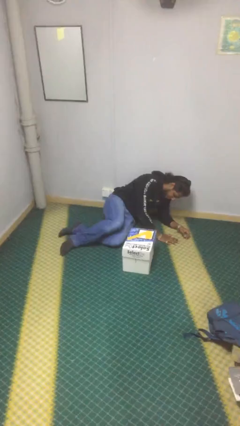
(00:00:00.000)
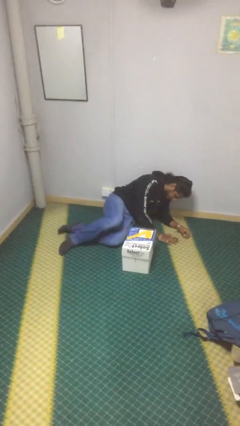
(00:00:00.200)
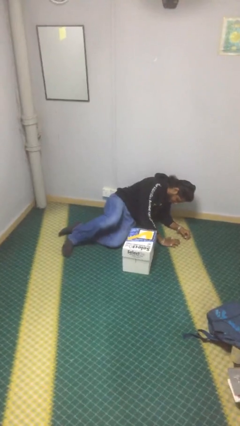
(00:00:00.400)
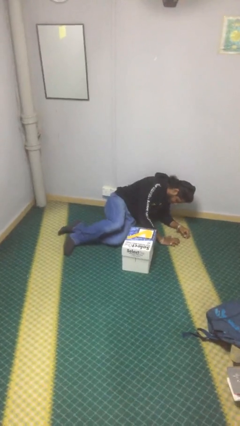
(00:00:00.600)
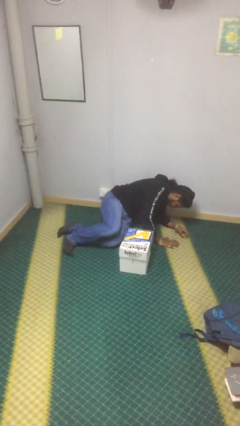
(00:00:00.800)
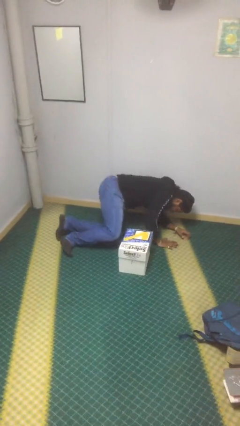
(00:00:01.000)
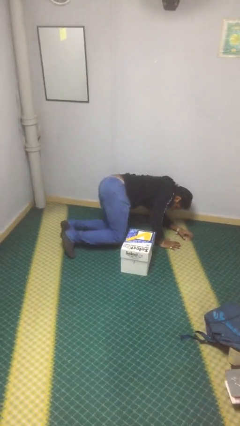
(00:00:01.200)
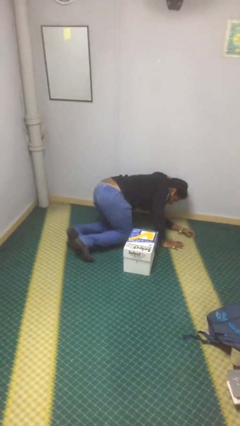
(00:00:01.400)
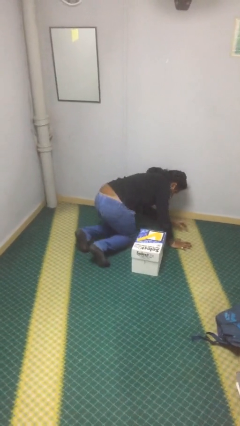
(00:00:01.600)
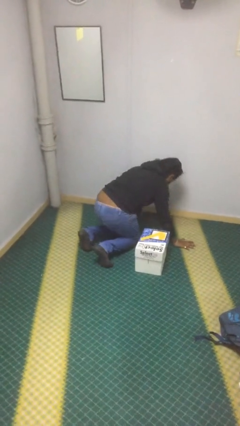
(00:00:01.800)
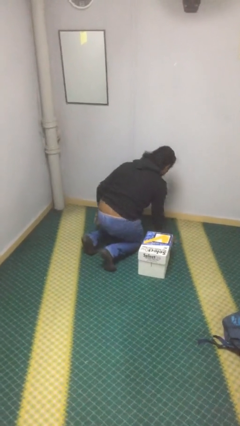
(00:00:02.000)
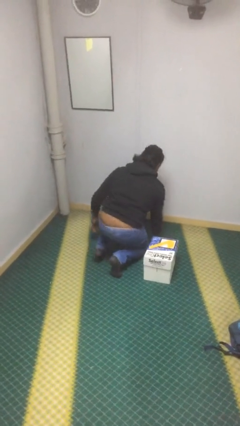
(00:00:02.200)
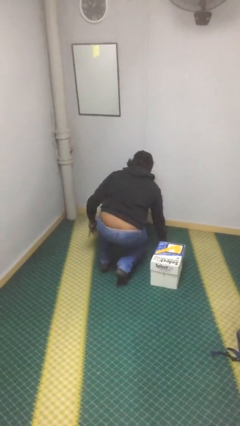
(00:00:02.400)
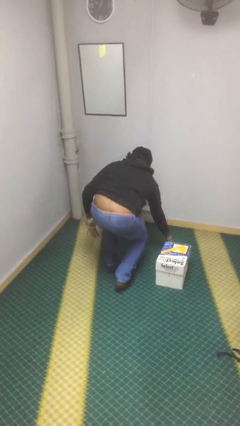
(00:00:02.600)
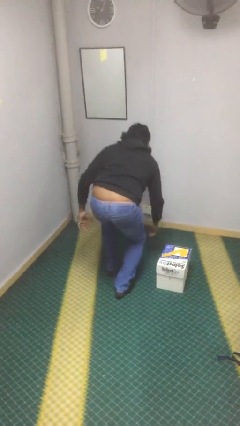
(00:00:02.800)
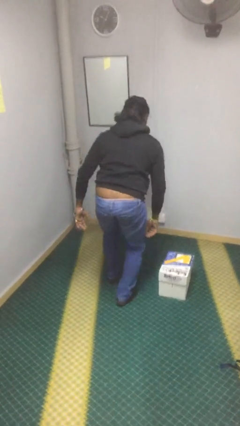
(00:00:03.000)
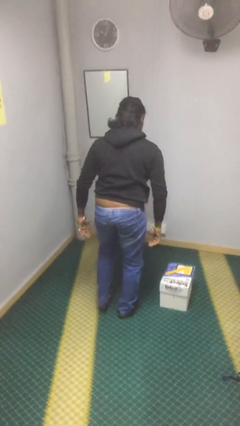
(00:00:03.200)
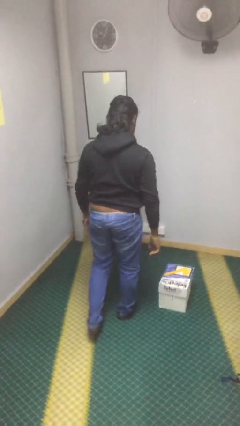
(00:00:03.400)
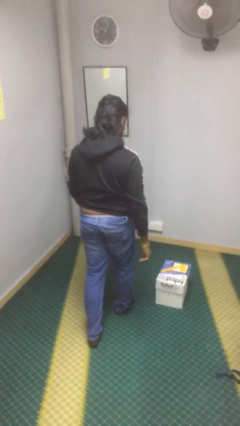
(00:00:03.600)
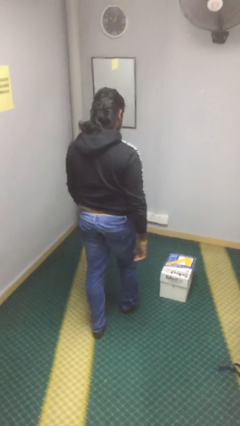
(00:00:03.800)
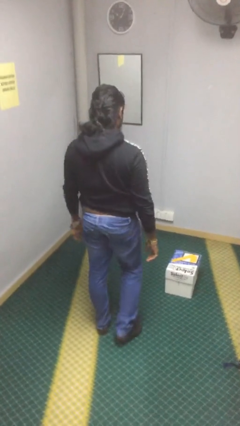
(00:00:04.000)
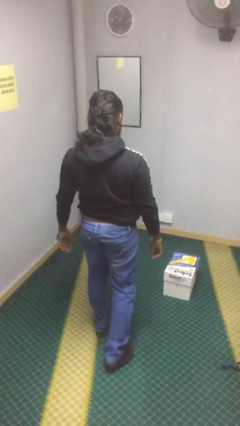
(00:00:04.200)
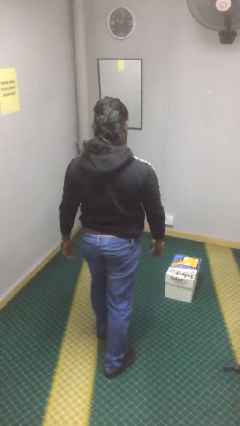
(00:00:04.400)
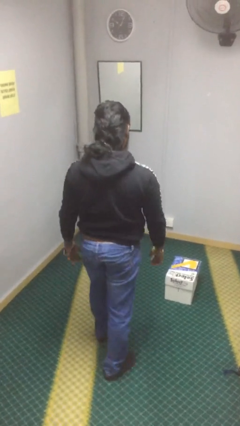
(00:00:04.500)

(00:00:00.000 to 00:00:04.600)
person stands up from floor

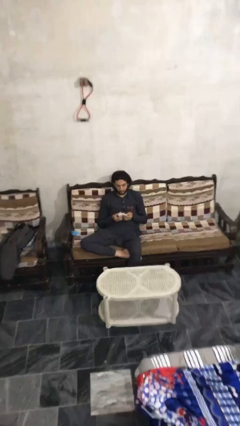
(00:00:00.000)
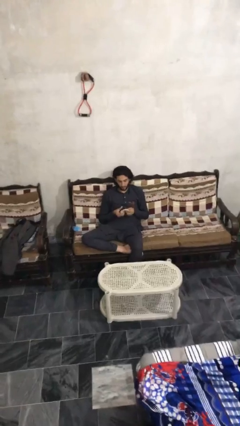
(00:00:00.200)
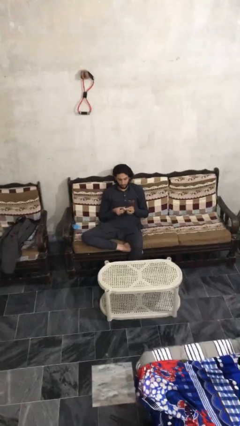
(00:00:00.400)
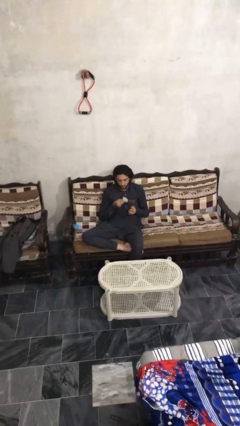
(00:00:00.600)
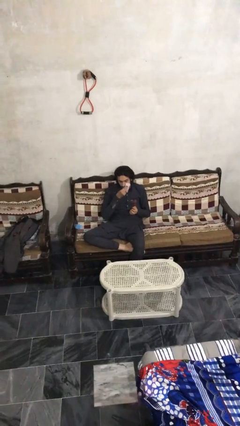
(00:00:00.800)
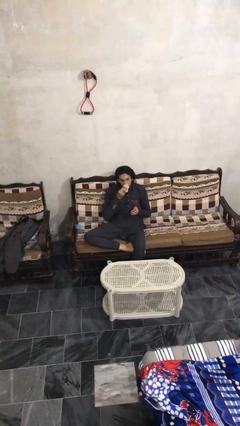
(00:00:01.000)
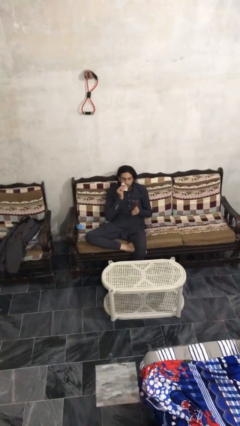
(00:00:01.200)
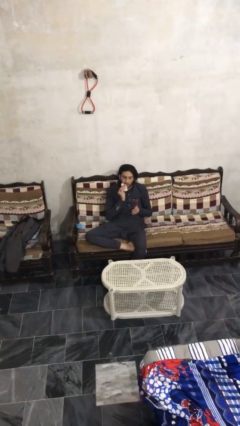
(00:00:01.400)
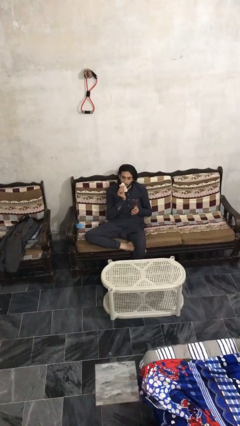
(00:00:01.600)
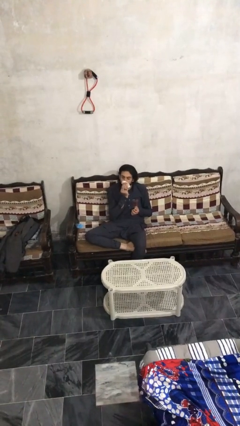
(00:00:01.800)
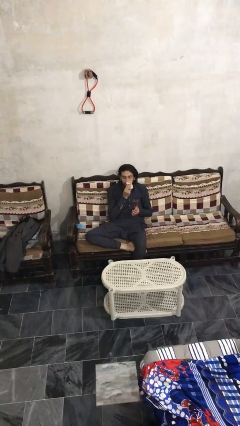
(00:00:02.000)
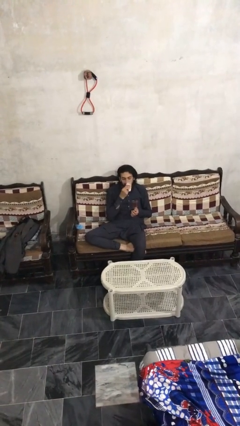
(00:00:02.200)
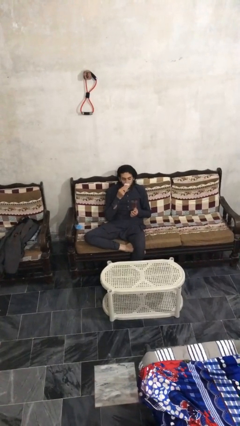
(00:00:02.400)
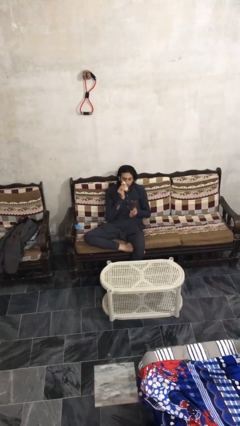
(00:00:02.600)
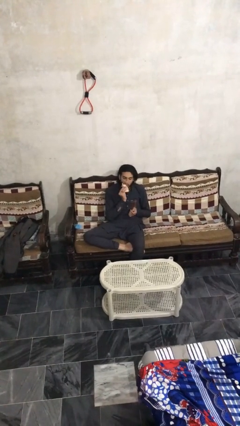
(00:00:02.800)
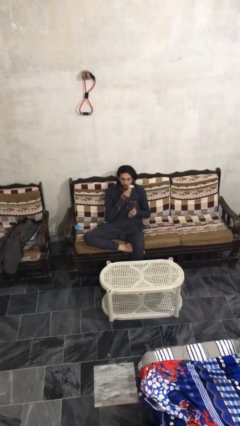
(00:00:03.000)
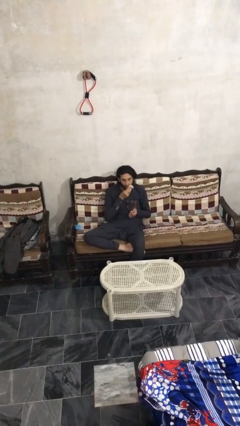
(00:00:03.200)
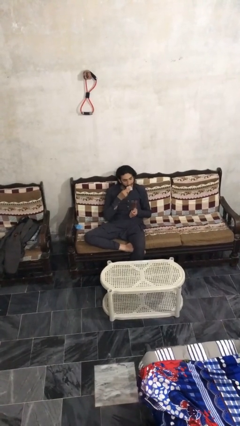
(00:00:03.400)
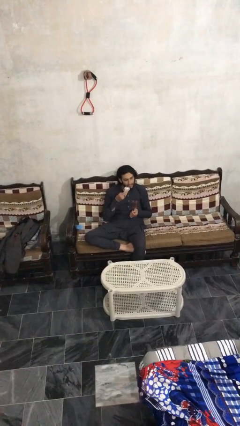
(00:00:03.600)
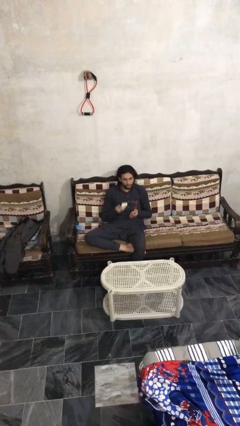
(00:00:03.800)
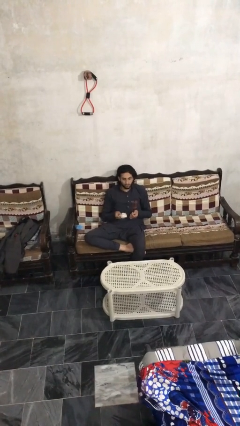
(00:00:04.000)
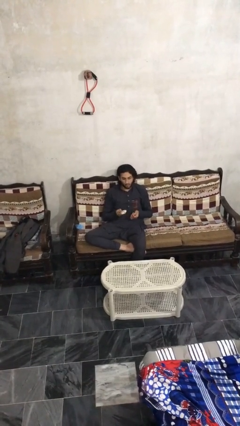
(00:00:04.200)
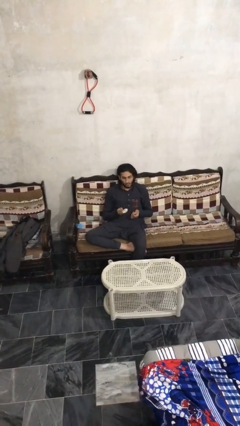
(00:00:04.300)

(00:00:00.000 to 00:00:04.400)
person wipes mouth with napkin

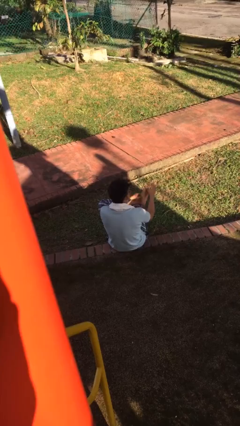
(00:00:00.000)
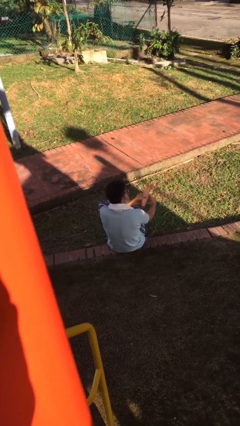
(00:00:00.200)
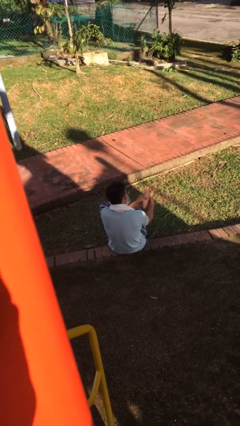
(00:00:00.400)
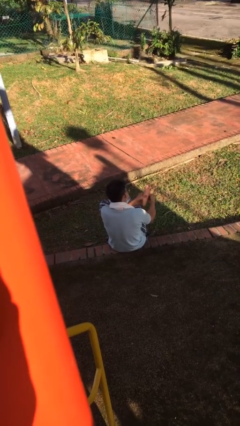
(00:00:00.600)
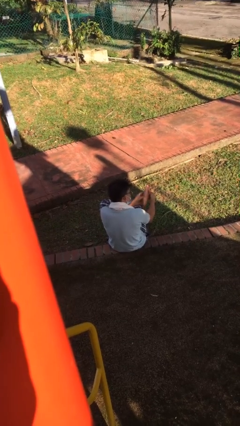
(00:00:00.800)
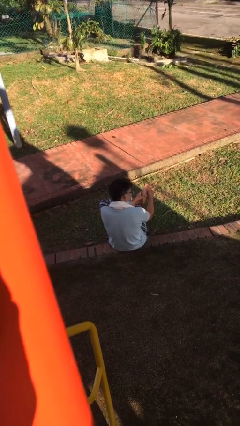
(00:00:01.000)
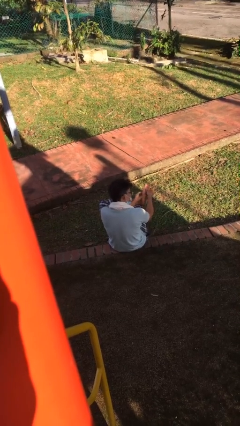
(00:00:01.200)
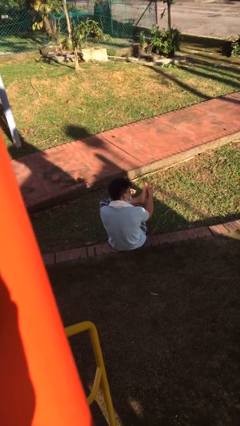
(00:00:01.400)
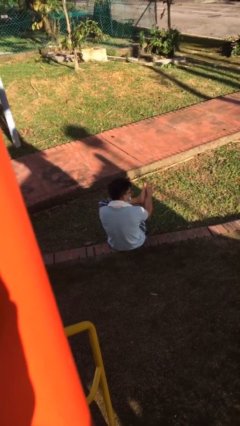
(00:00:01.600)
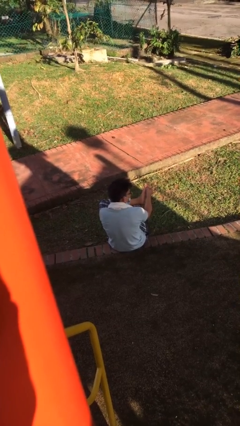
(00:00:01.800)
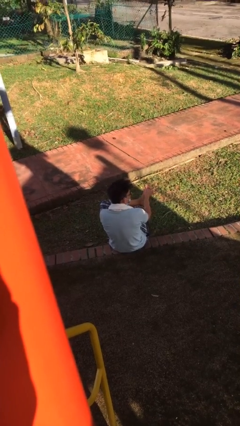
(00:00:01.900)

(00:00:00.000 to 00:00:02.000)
person rubs foot

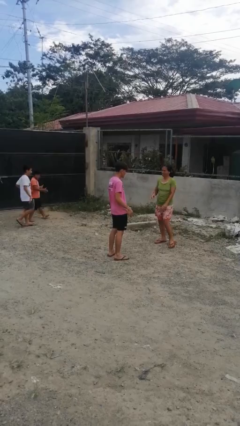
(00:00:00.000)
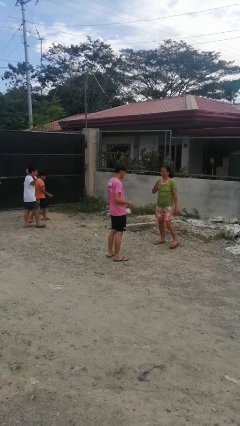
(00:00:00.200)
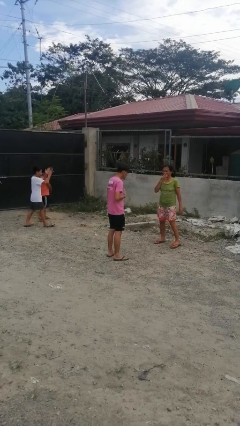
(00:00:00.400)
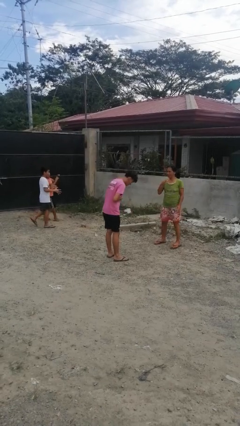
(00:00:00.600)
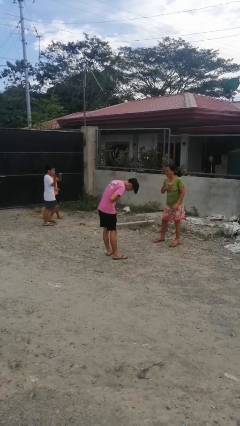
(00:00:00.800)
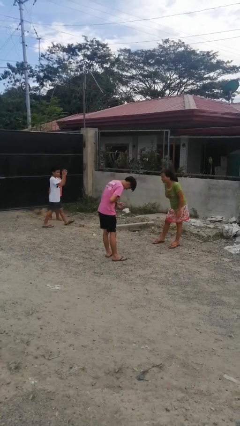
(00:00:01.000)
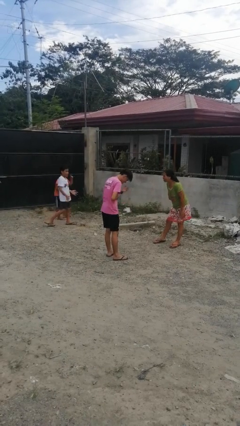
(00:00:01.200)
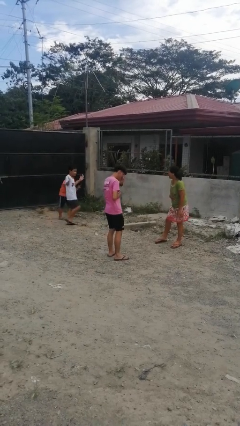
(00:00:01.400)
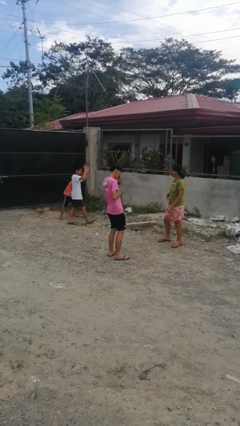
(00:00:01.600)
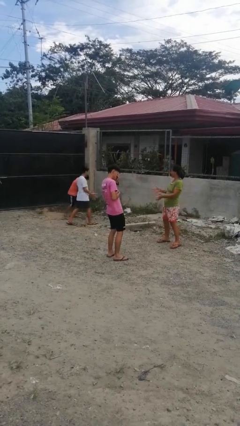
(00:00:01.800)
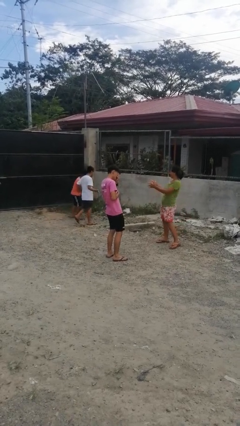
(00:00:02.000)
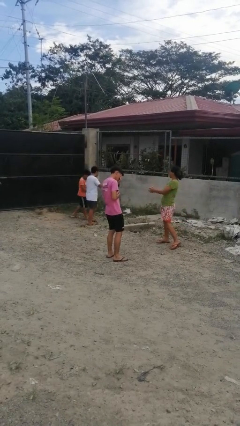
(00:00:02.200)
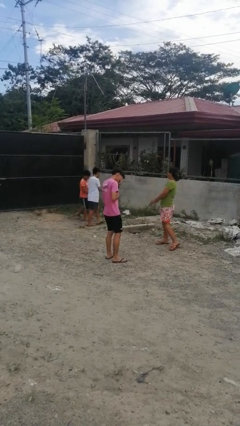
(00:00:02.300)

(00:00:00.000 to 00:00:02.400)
person laughs with person

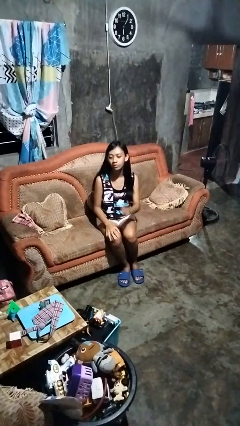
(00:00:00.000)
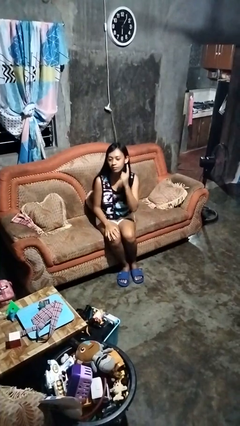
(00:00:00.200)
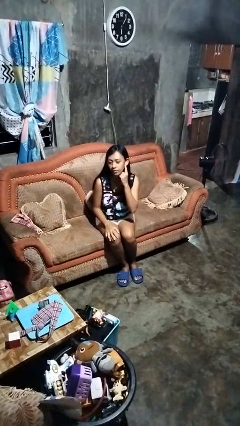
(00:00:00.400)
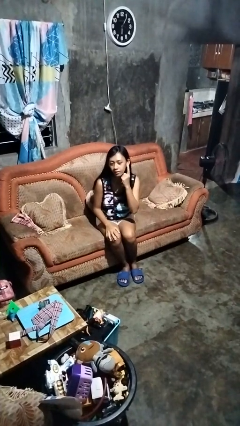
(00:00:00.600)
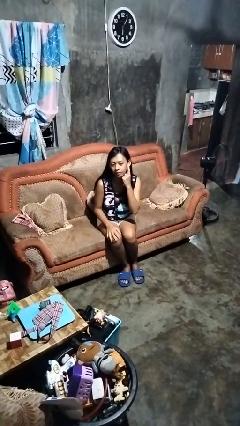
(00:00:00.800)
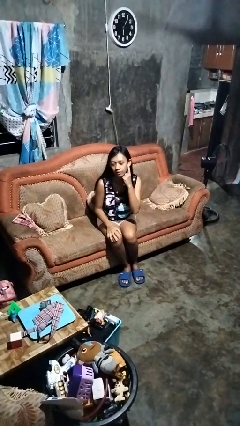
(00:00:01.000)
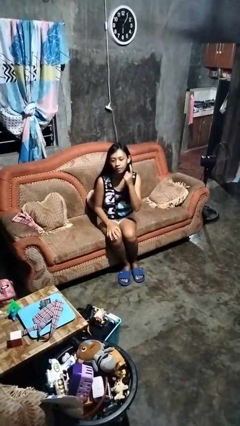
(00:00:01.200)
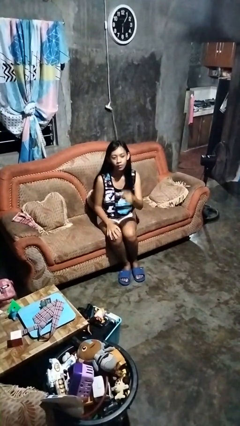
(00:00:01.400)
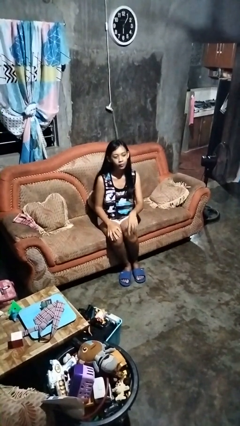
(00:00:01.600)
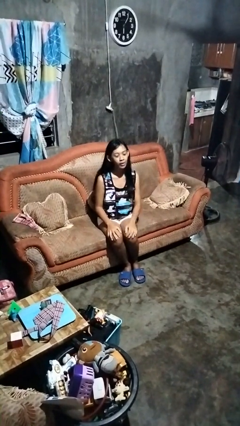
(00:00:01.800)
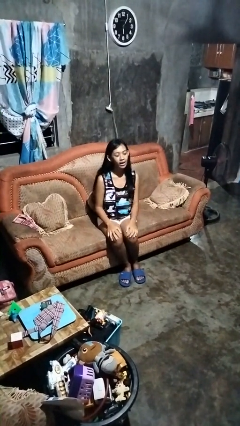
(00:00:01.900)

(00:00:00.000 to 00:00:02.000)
person gestures listen closely

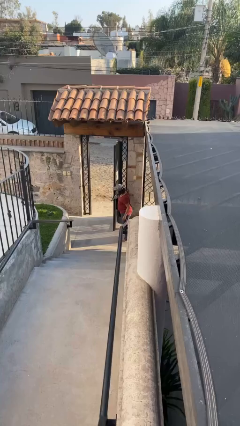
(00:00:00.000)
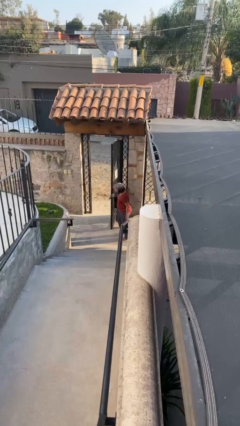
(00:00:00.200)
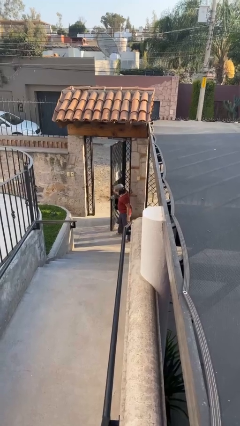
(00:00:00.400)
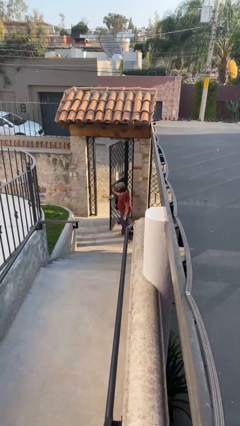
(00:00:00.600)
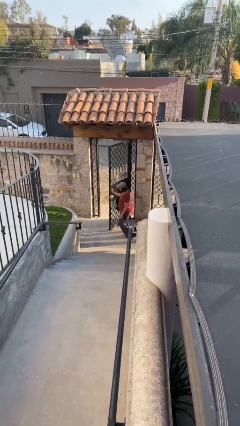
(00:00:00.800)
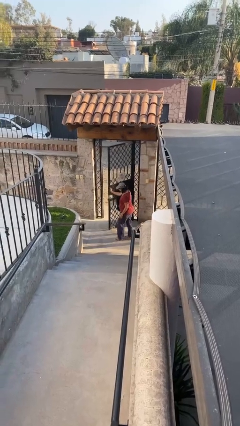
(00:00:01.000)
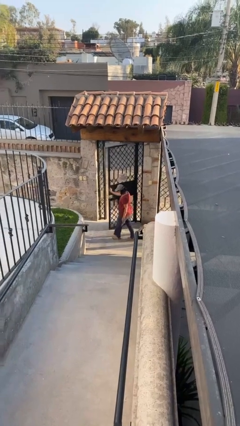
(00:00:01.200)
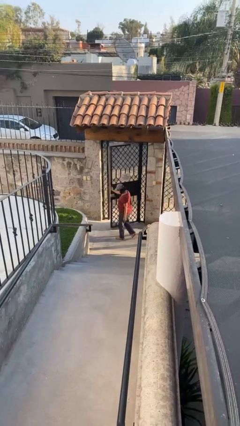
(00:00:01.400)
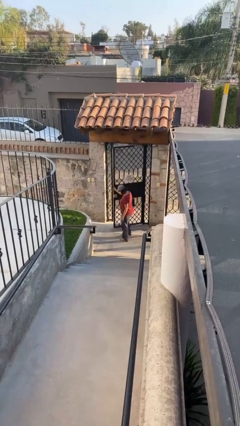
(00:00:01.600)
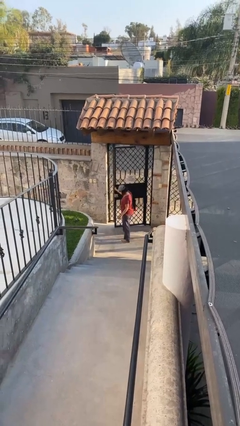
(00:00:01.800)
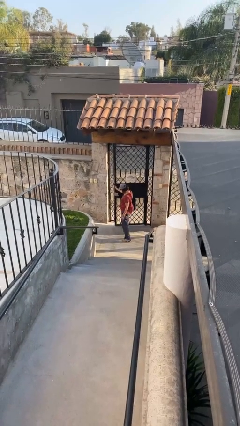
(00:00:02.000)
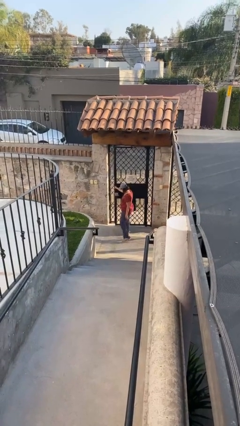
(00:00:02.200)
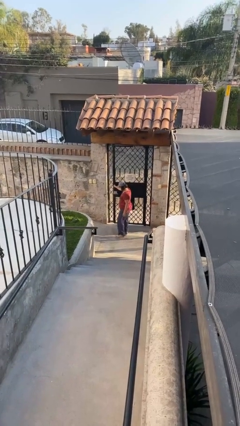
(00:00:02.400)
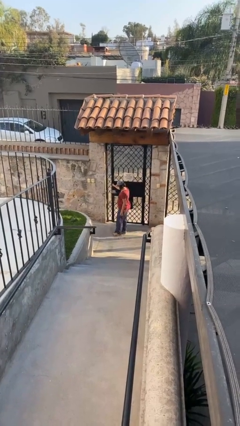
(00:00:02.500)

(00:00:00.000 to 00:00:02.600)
person closes facility door
